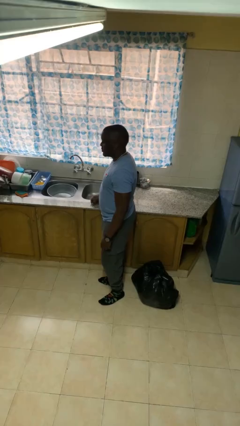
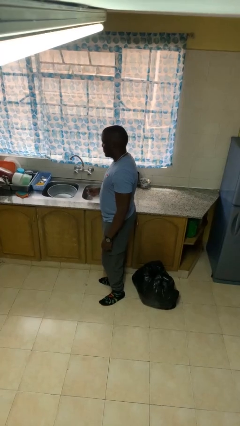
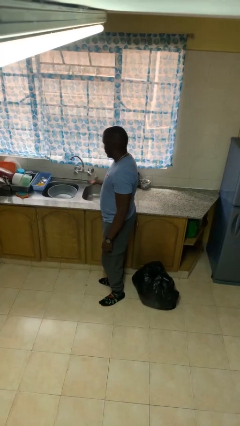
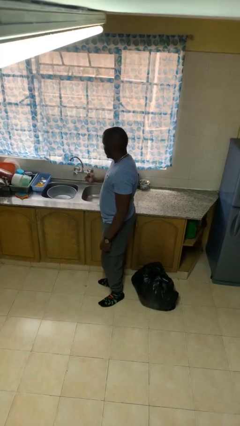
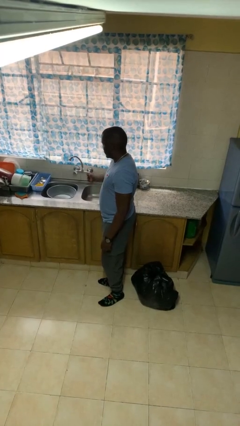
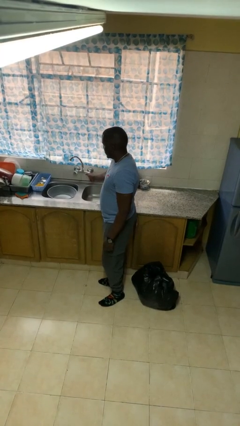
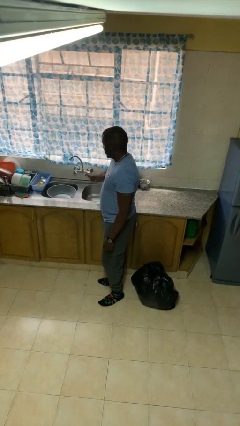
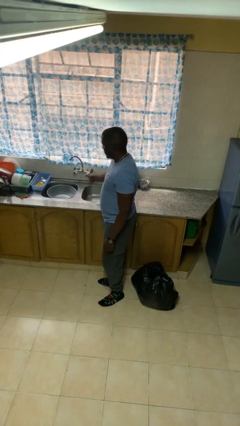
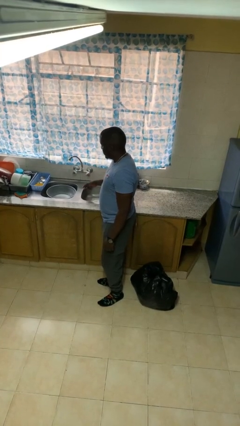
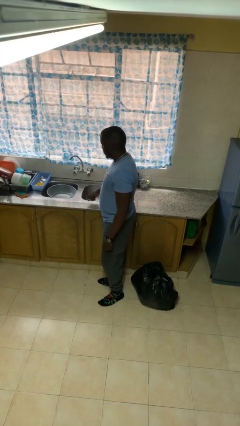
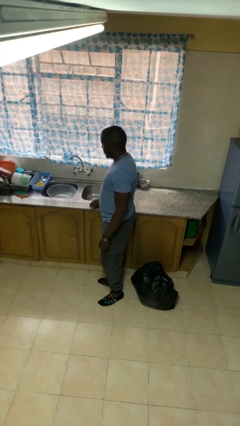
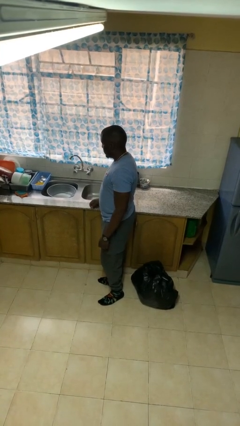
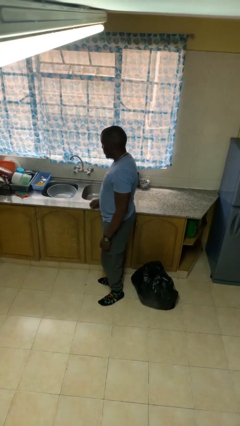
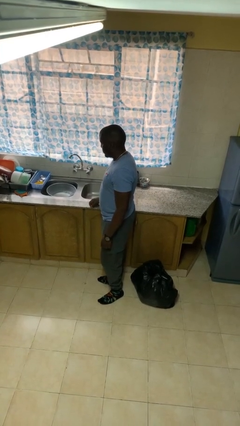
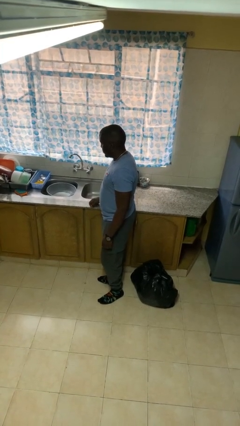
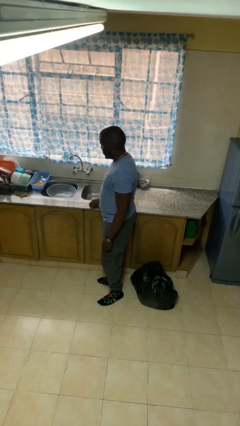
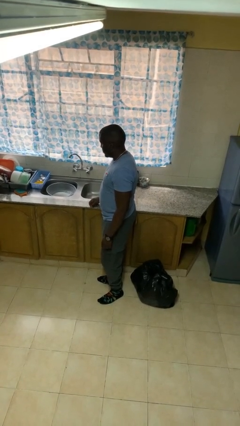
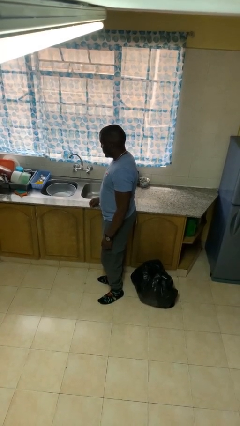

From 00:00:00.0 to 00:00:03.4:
person turns on faucet

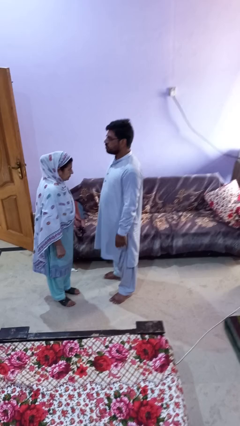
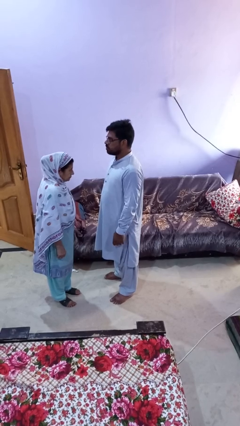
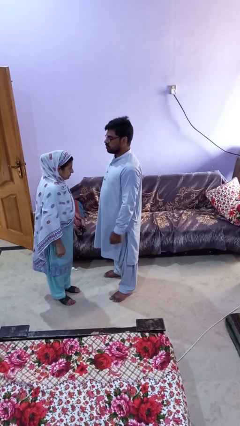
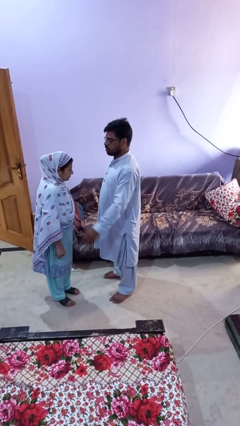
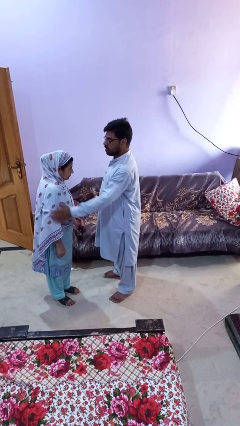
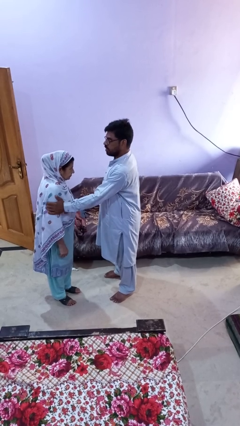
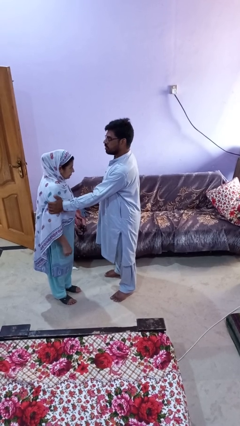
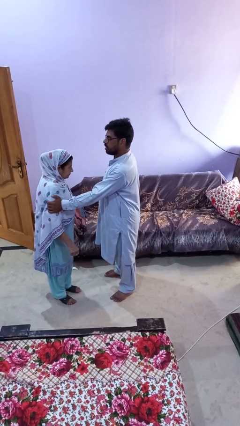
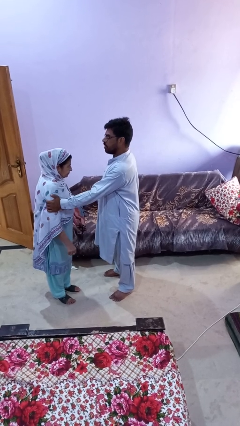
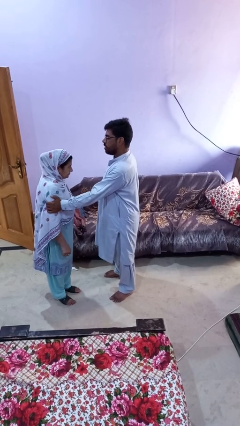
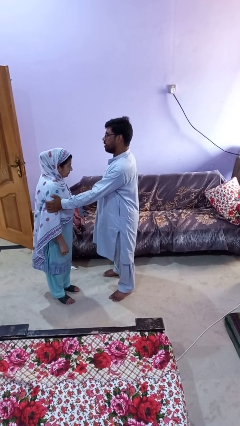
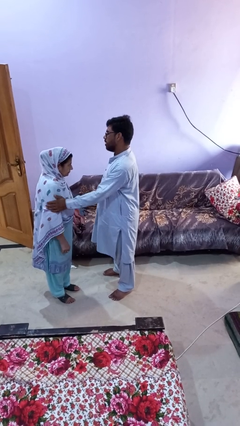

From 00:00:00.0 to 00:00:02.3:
person grabs person by bicep

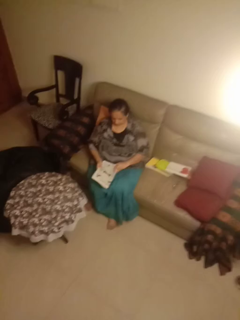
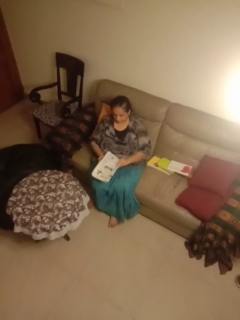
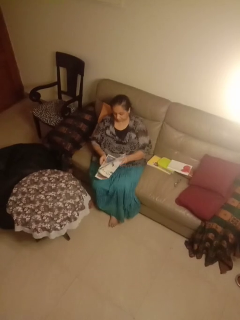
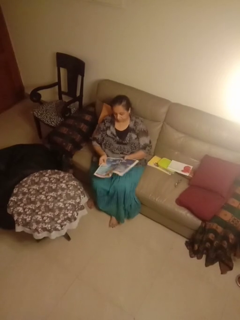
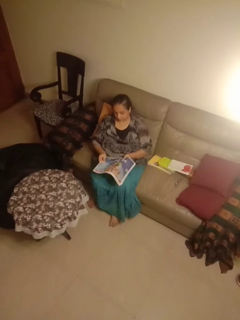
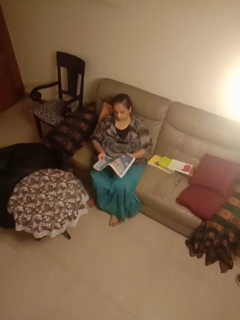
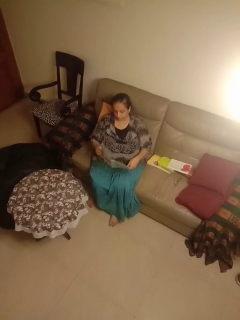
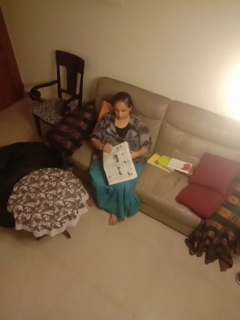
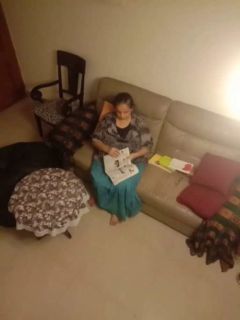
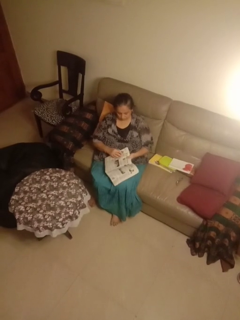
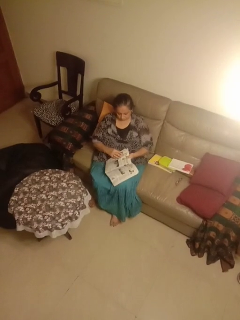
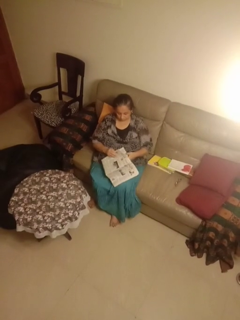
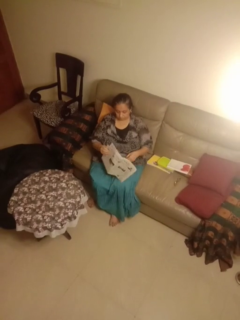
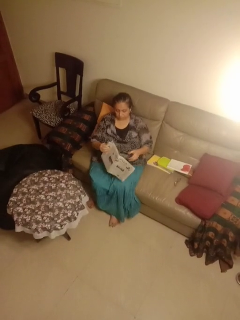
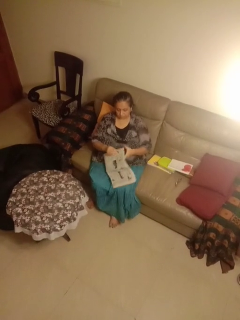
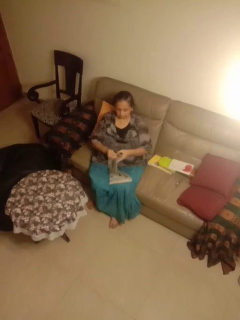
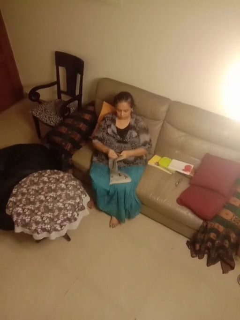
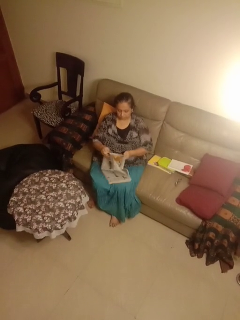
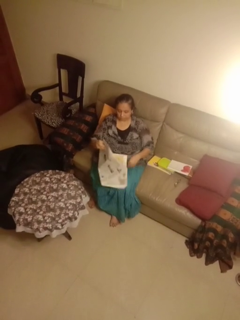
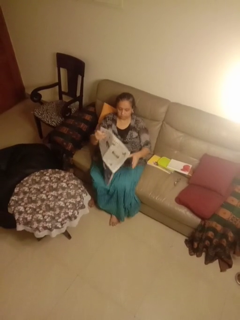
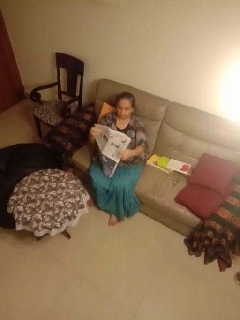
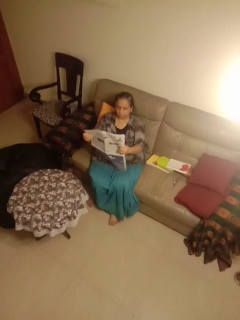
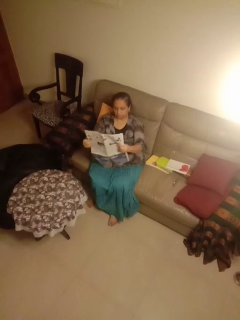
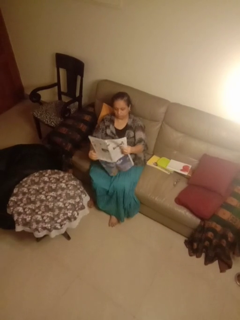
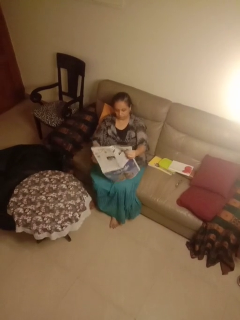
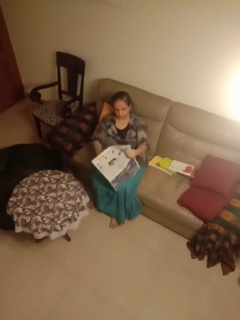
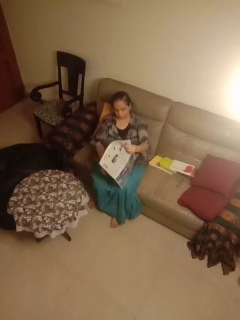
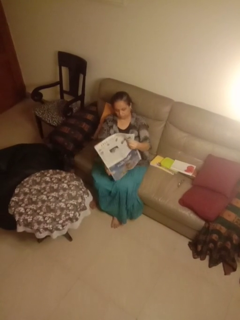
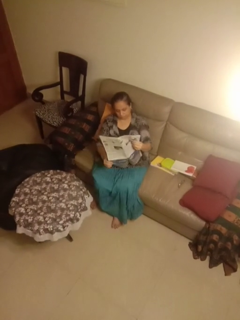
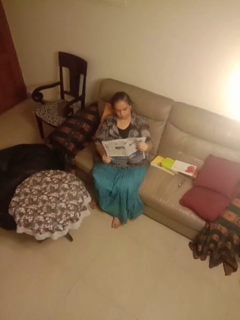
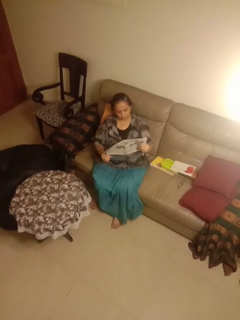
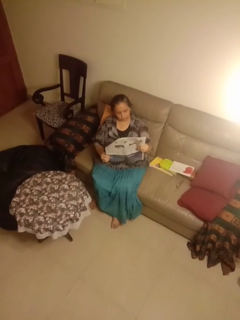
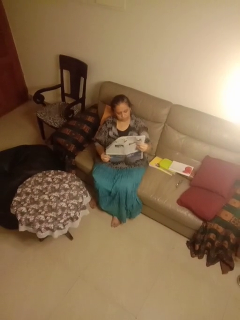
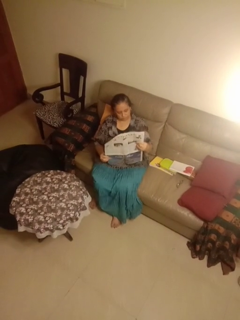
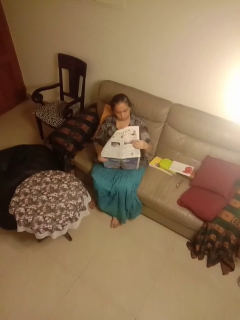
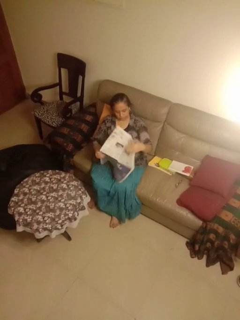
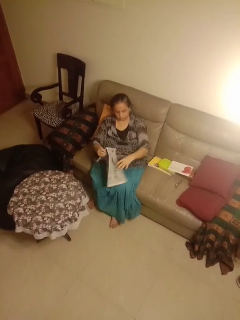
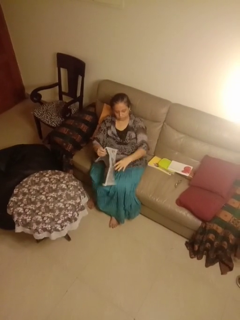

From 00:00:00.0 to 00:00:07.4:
person reads newspaper

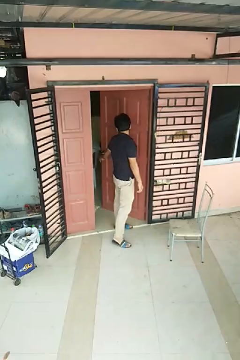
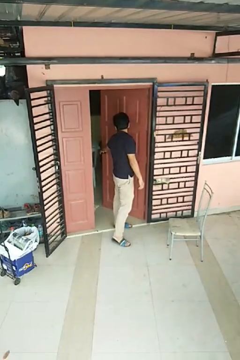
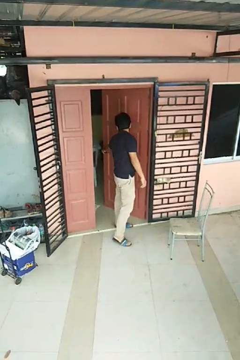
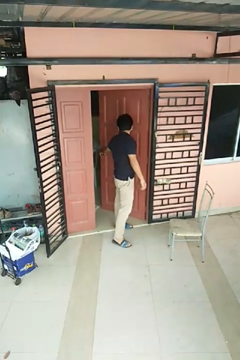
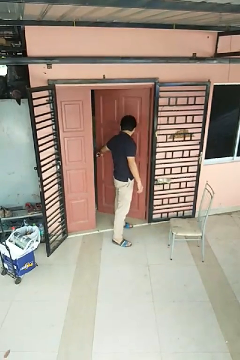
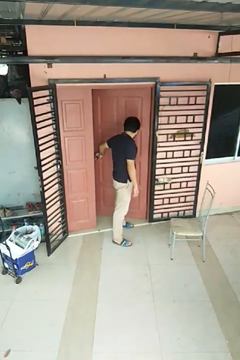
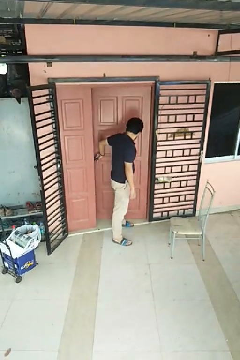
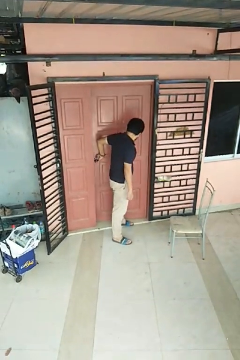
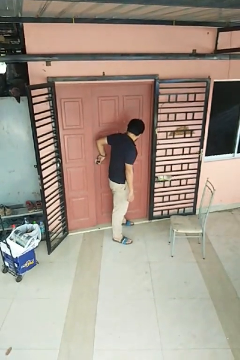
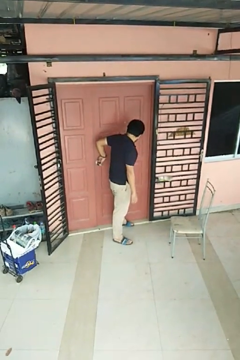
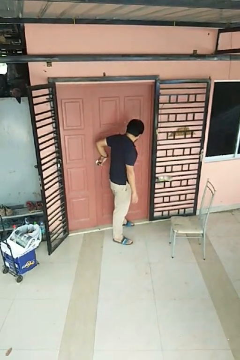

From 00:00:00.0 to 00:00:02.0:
person closes door with hip

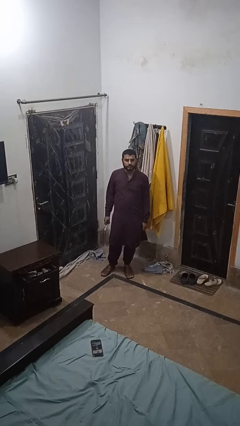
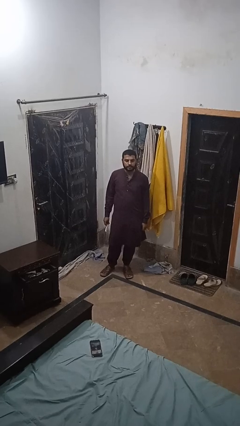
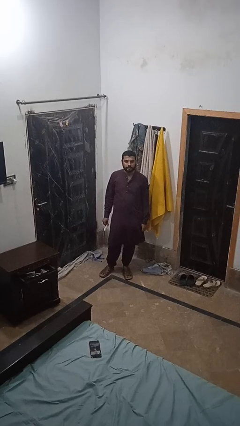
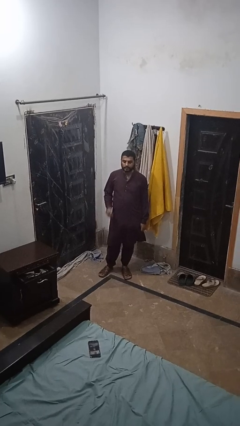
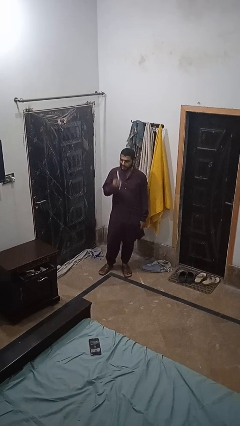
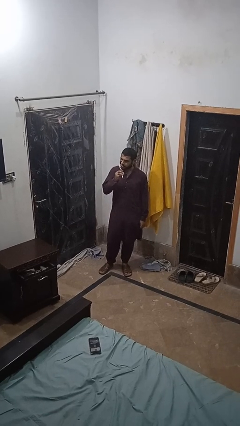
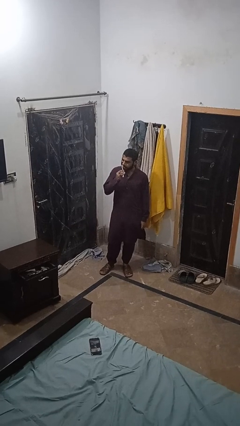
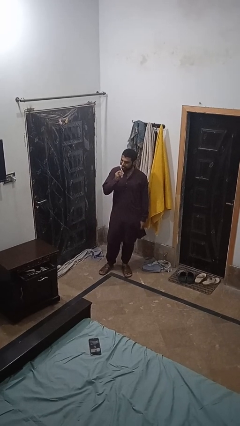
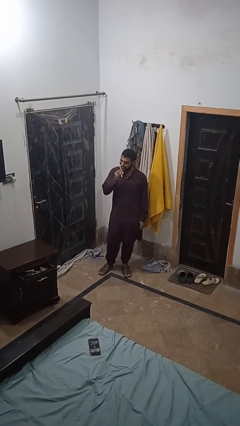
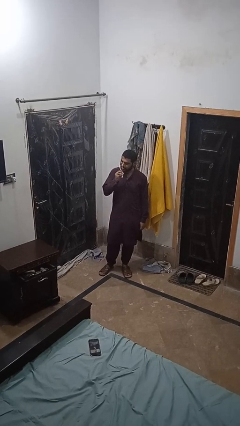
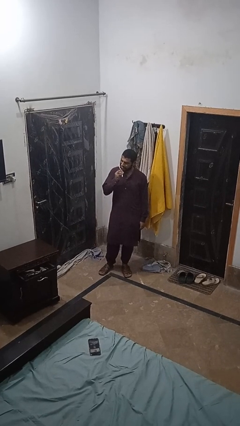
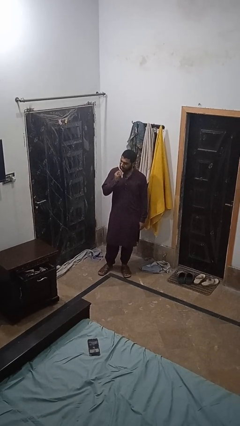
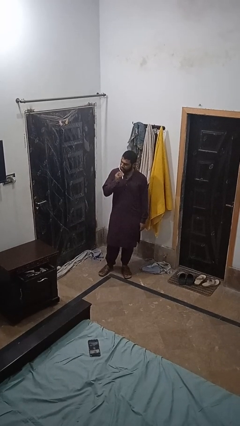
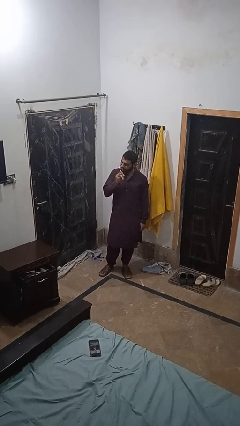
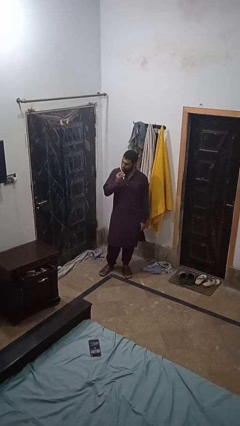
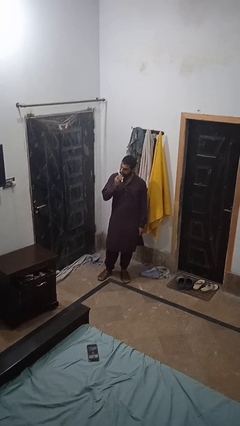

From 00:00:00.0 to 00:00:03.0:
person brushes teeth

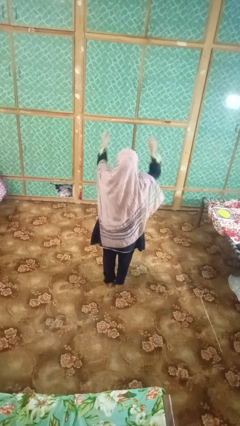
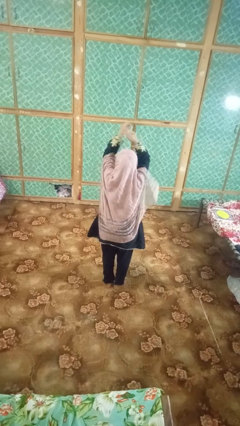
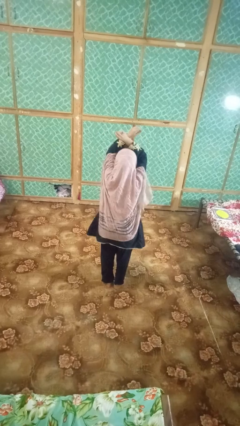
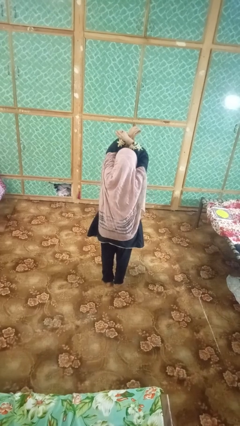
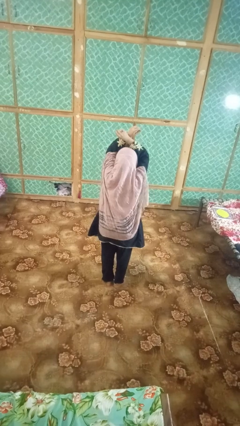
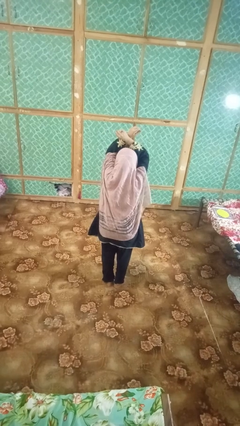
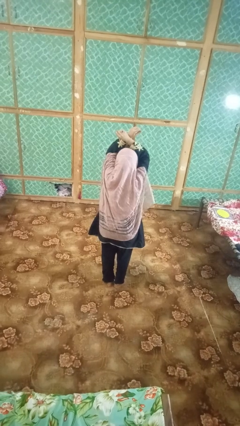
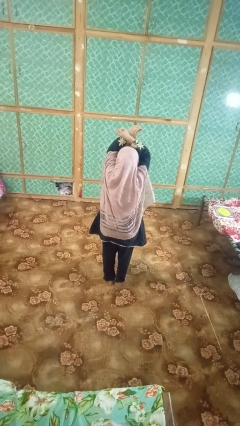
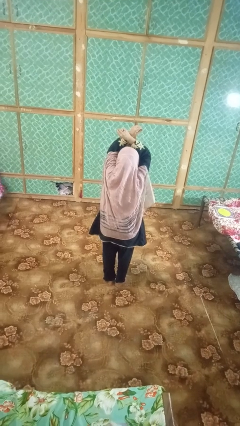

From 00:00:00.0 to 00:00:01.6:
person gestures arms x
